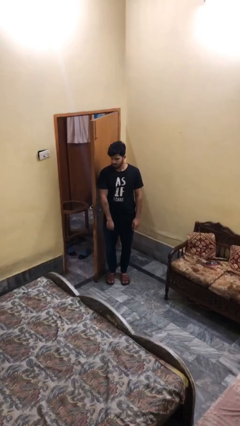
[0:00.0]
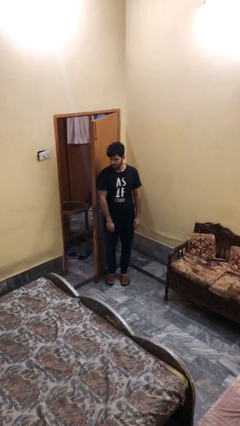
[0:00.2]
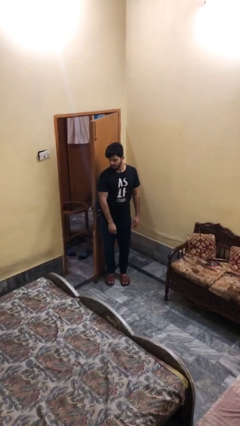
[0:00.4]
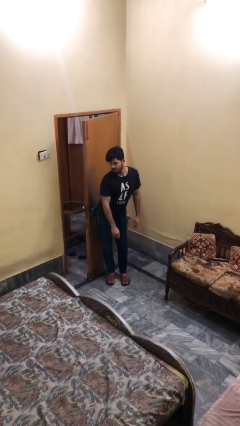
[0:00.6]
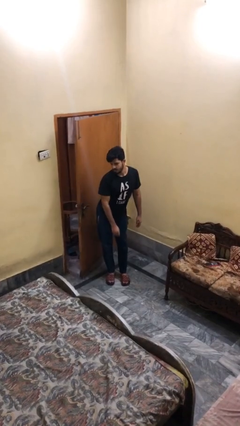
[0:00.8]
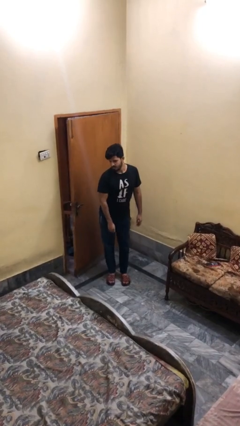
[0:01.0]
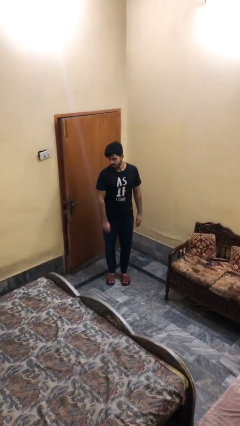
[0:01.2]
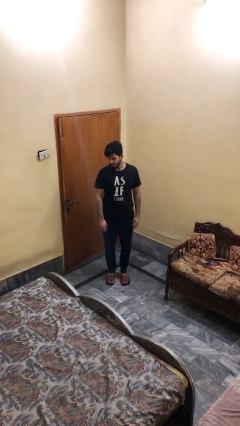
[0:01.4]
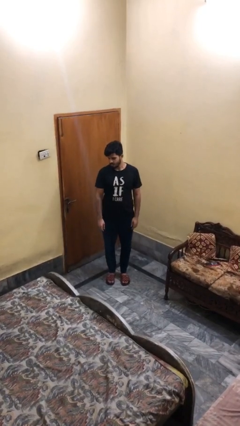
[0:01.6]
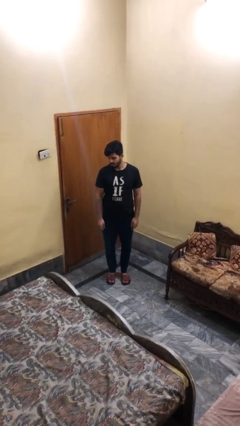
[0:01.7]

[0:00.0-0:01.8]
person closes door with hip

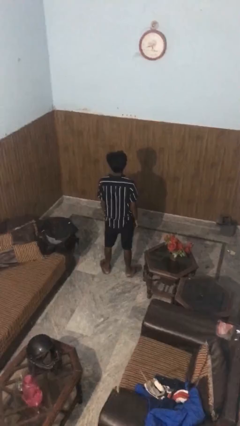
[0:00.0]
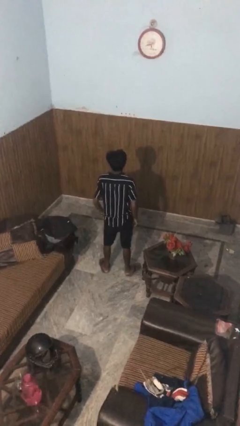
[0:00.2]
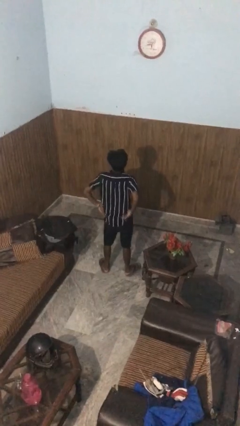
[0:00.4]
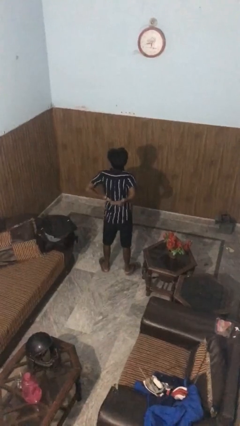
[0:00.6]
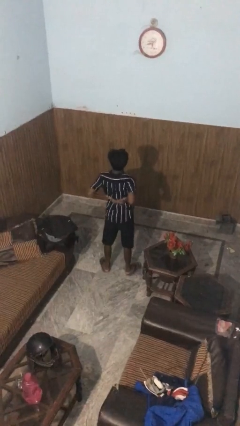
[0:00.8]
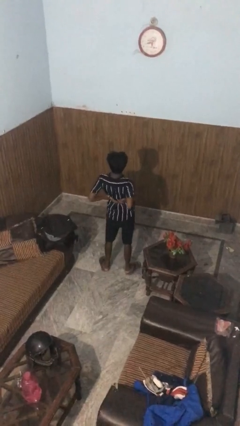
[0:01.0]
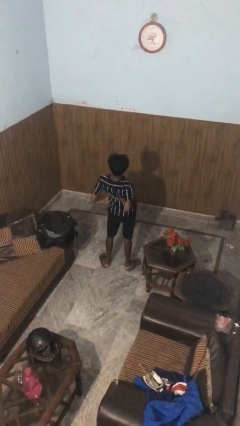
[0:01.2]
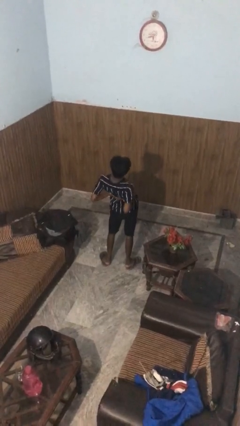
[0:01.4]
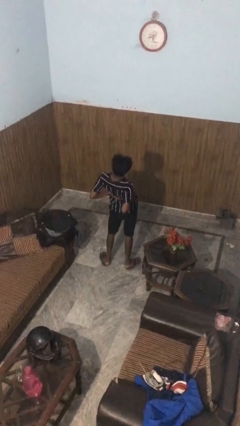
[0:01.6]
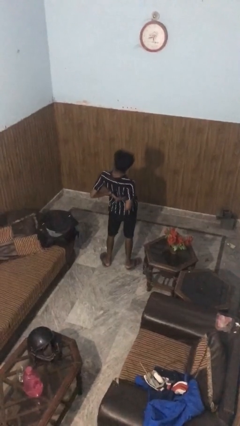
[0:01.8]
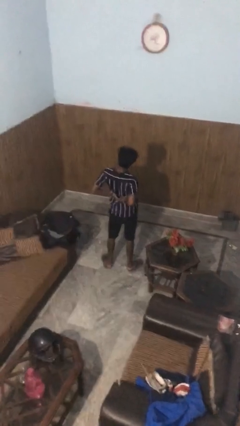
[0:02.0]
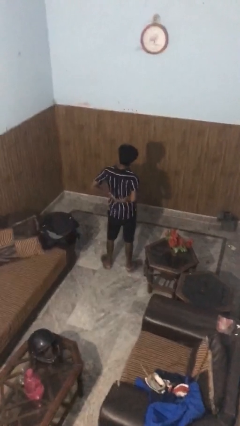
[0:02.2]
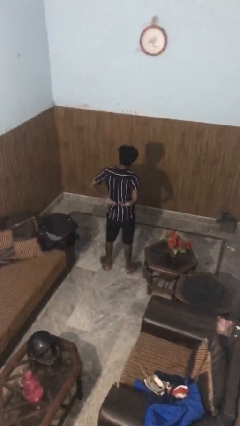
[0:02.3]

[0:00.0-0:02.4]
person stretches back

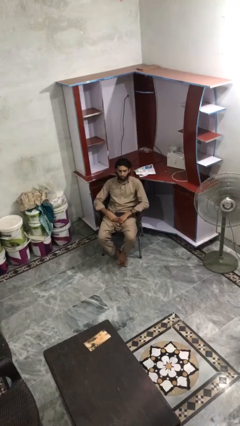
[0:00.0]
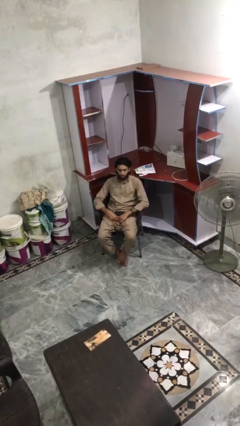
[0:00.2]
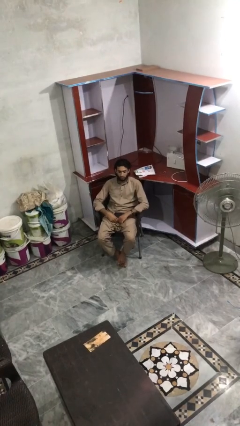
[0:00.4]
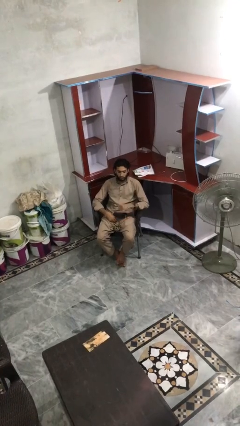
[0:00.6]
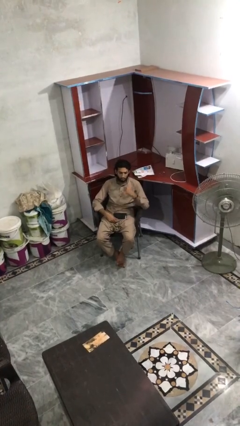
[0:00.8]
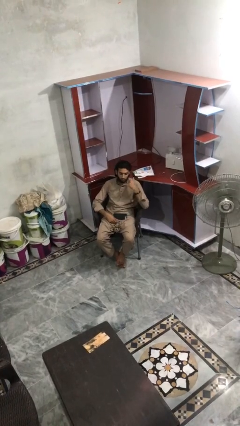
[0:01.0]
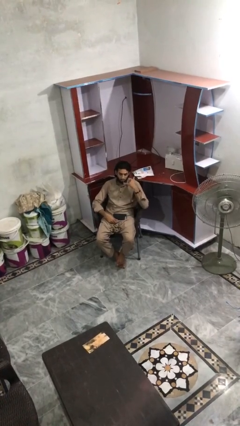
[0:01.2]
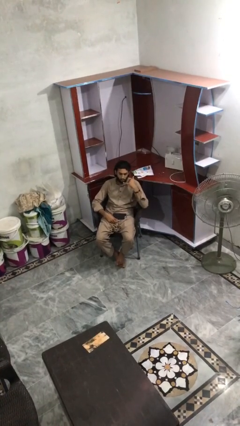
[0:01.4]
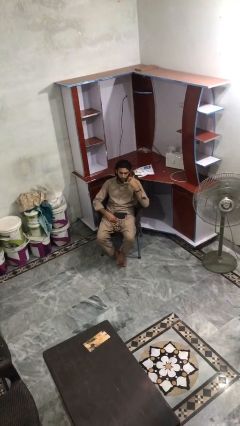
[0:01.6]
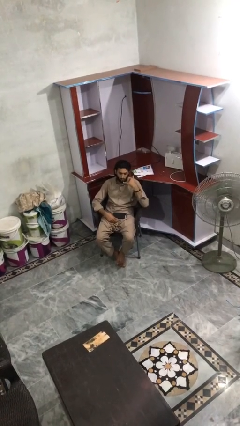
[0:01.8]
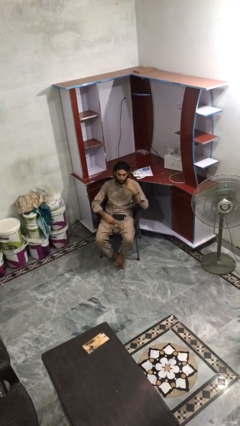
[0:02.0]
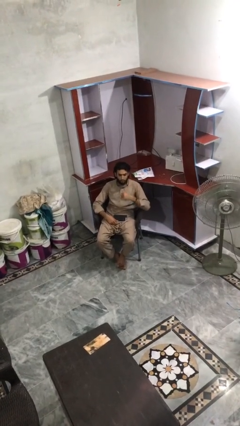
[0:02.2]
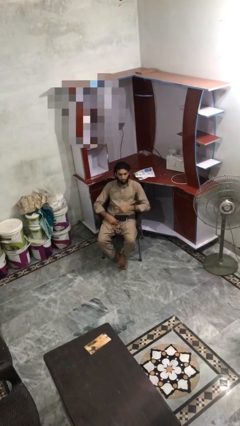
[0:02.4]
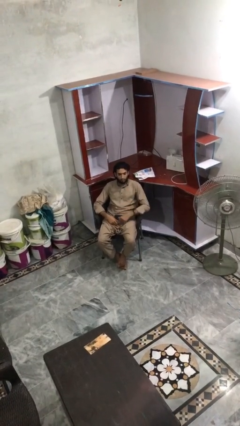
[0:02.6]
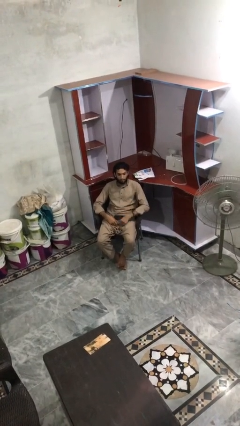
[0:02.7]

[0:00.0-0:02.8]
person gestures call me

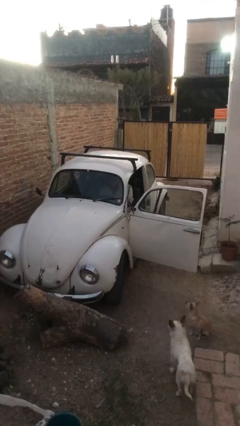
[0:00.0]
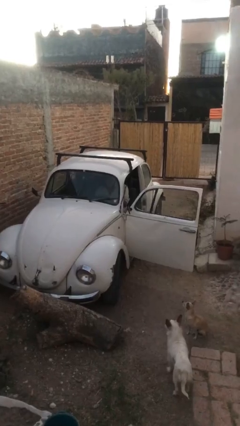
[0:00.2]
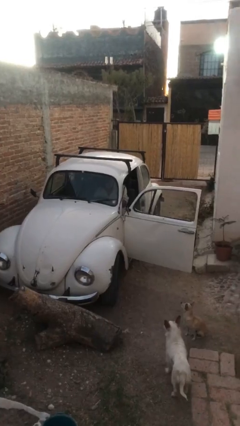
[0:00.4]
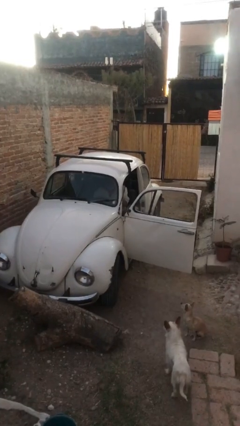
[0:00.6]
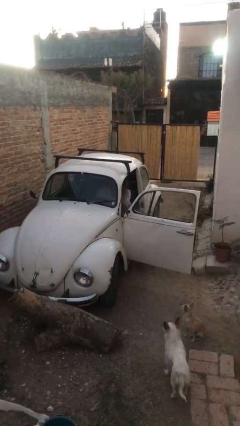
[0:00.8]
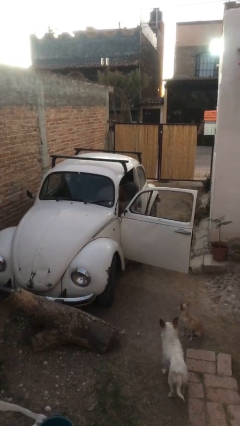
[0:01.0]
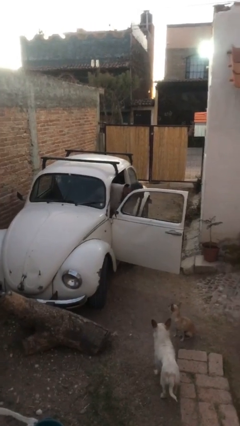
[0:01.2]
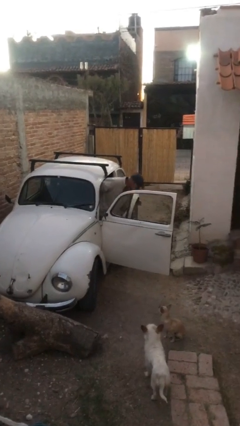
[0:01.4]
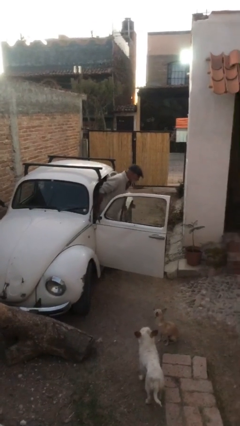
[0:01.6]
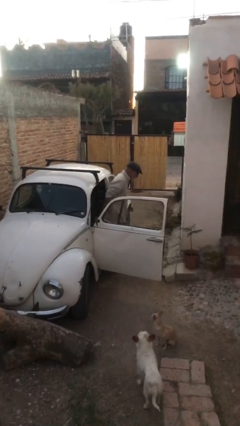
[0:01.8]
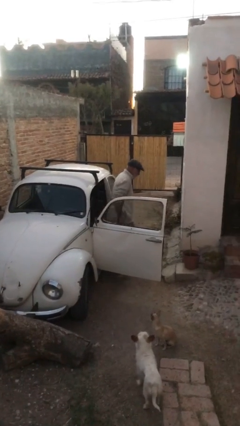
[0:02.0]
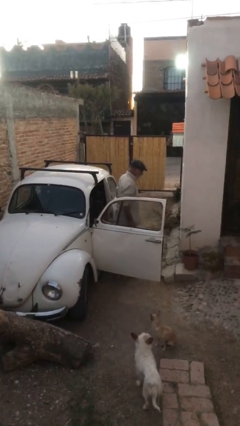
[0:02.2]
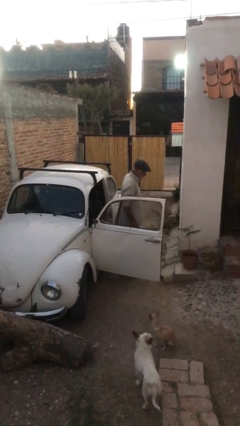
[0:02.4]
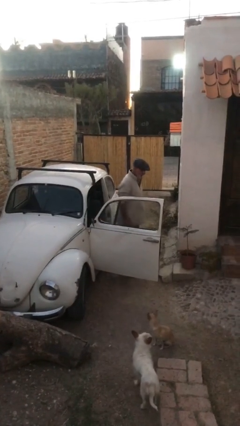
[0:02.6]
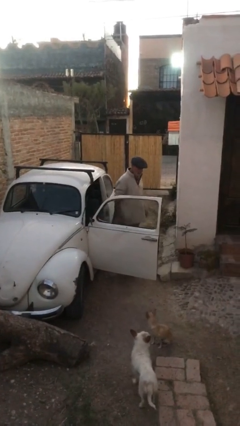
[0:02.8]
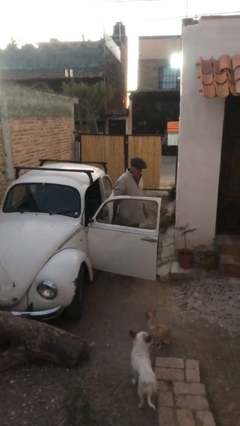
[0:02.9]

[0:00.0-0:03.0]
person exits car

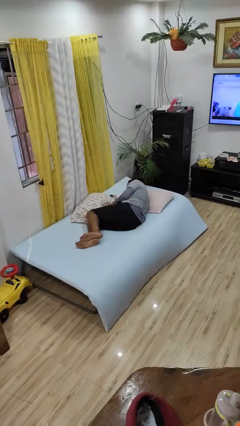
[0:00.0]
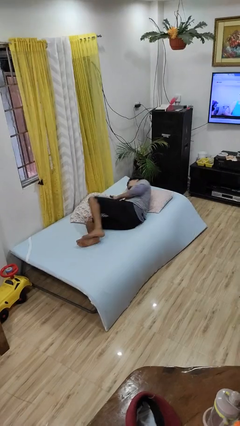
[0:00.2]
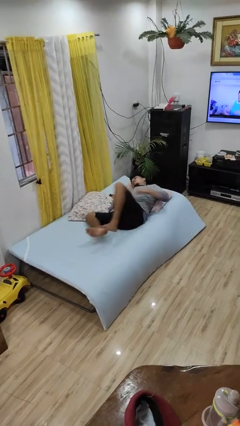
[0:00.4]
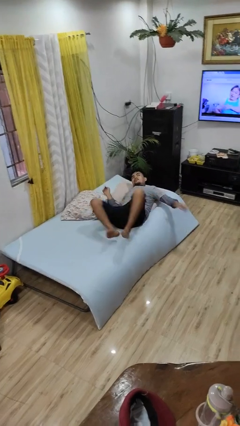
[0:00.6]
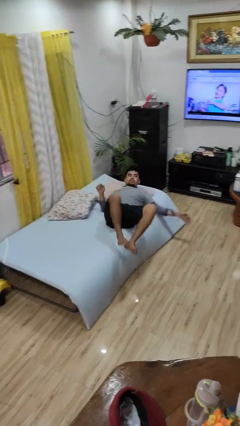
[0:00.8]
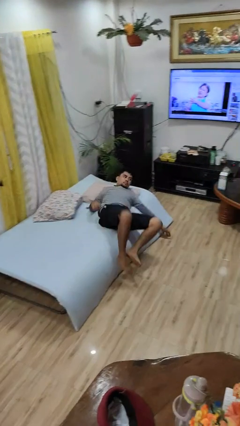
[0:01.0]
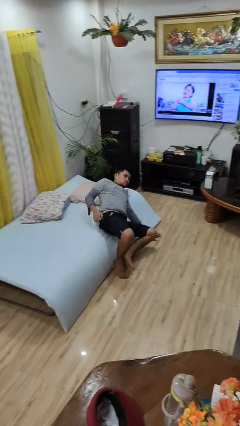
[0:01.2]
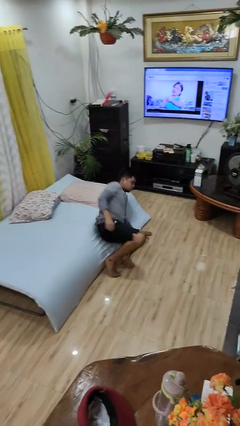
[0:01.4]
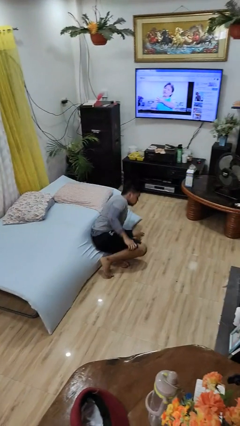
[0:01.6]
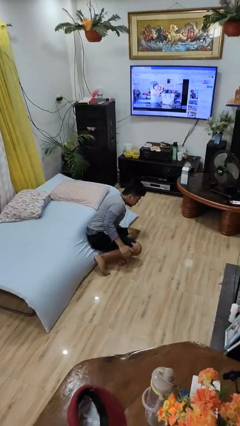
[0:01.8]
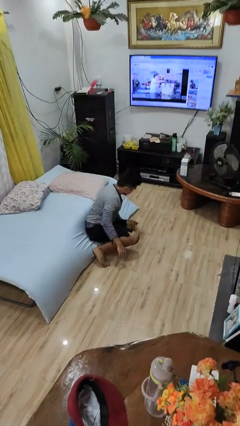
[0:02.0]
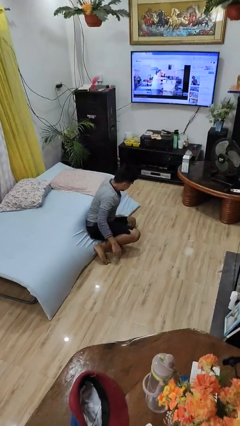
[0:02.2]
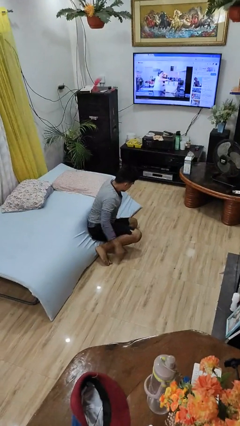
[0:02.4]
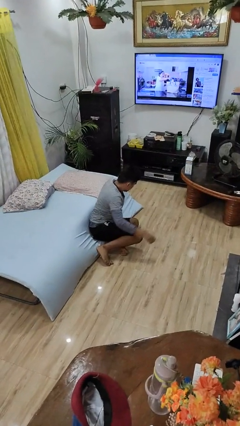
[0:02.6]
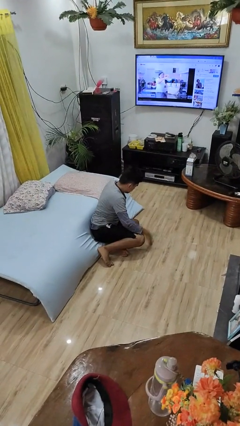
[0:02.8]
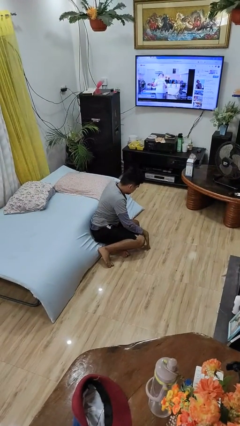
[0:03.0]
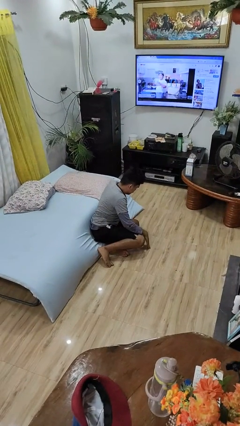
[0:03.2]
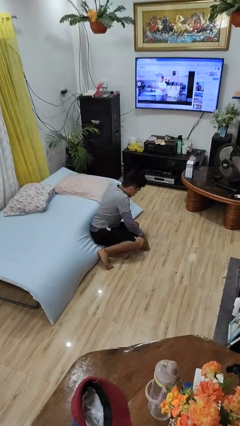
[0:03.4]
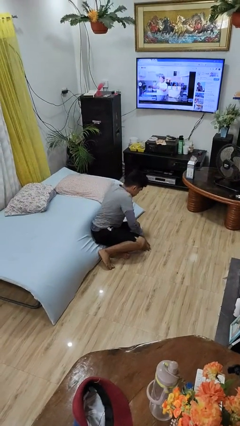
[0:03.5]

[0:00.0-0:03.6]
person falls from bed

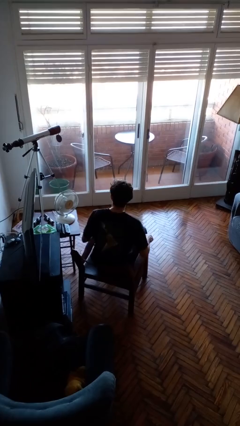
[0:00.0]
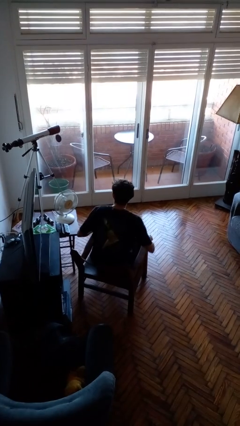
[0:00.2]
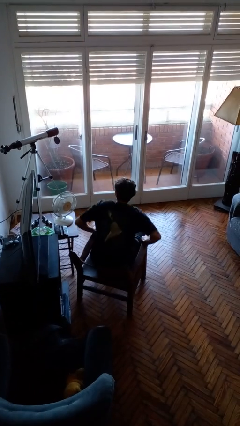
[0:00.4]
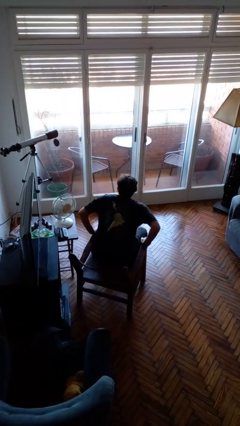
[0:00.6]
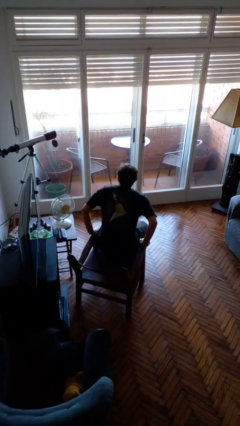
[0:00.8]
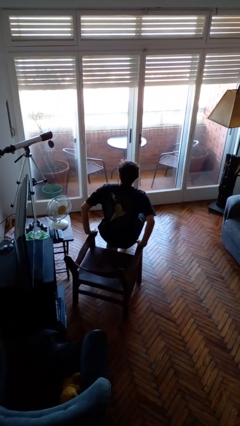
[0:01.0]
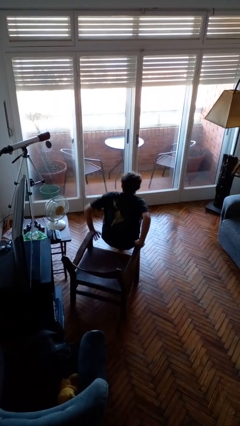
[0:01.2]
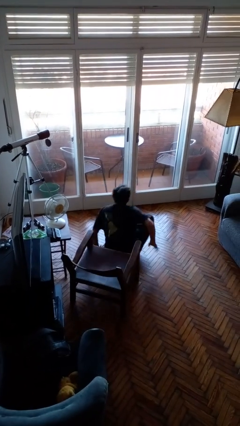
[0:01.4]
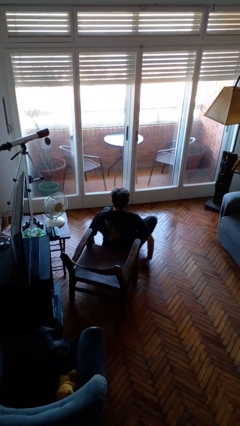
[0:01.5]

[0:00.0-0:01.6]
person falls from chair

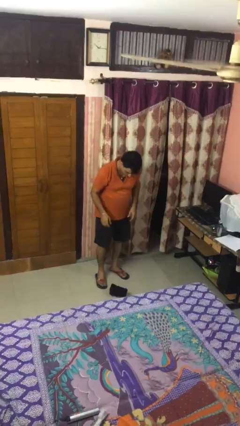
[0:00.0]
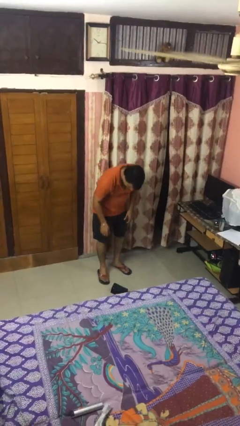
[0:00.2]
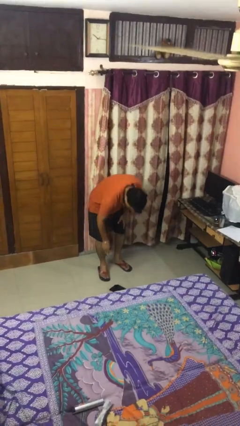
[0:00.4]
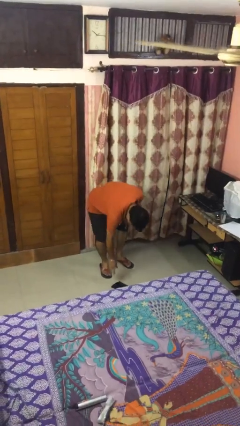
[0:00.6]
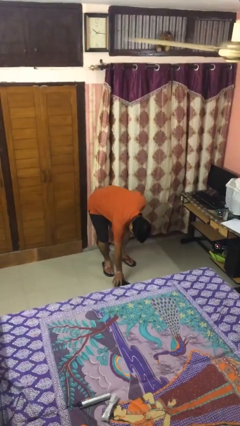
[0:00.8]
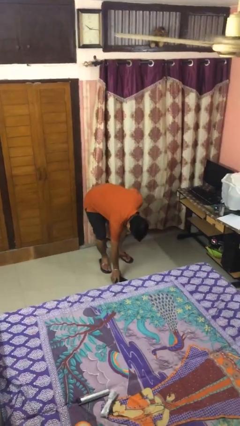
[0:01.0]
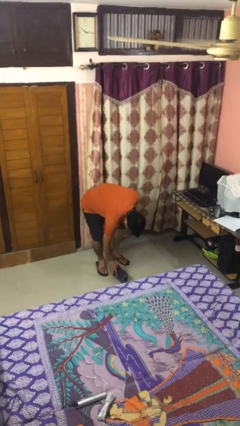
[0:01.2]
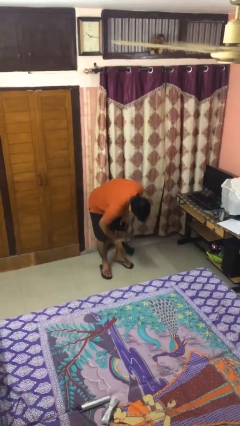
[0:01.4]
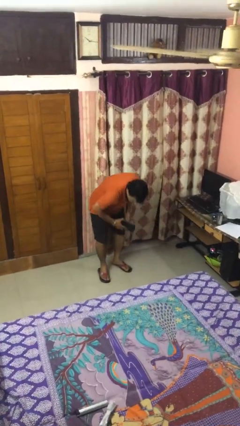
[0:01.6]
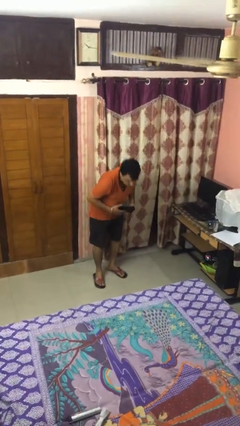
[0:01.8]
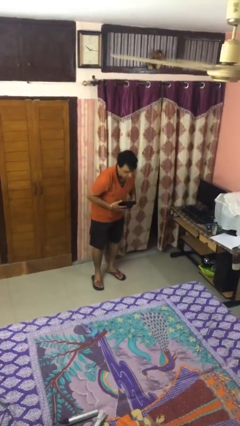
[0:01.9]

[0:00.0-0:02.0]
person picks up object from floor

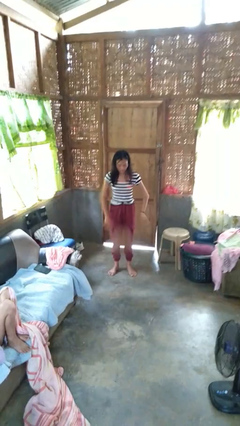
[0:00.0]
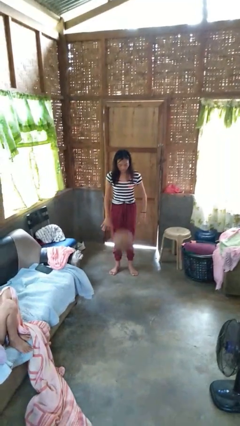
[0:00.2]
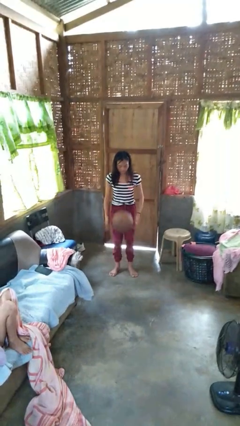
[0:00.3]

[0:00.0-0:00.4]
person bounces ball on floor
